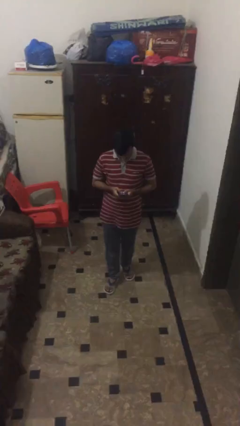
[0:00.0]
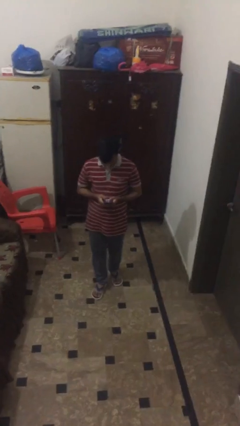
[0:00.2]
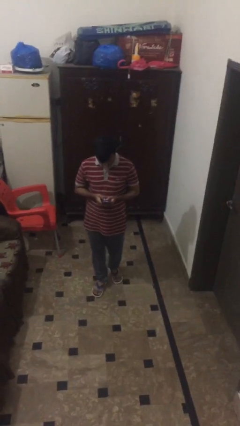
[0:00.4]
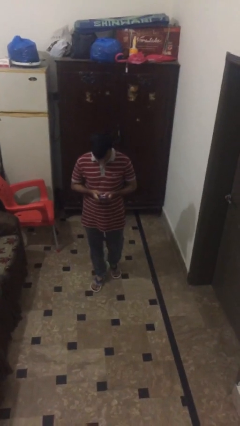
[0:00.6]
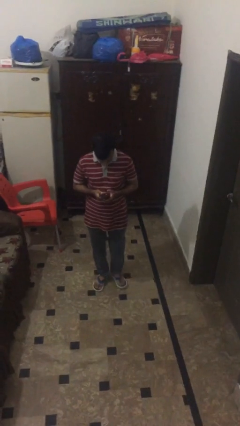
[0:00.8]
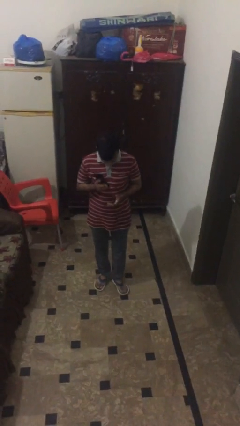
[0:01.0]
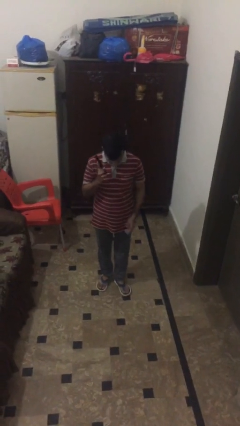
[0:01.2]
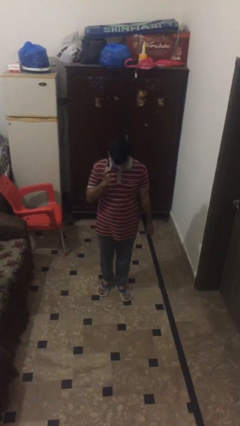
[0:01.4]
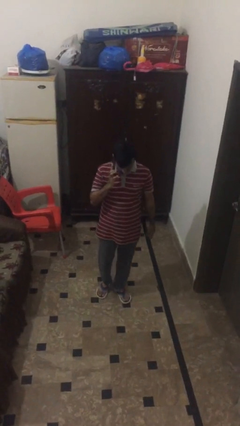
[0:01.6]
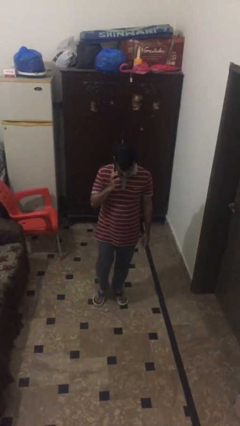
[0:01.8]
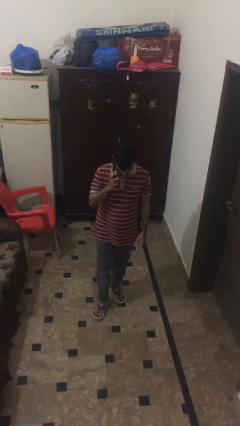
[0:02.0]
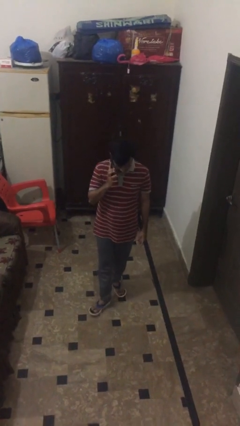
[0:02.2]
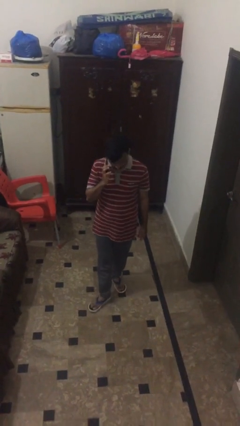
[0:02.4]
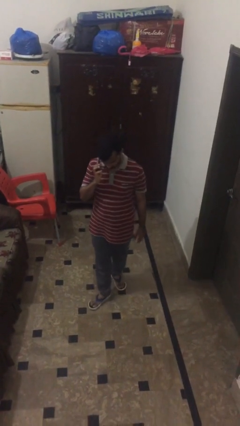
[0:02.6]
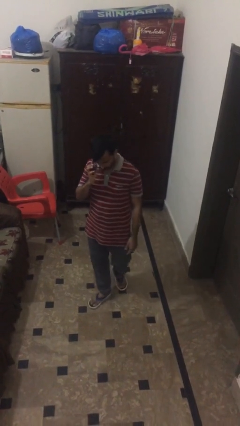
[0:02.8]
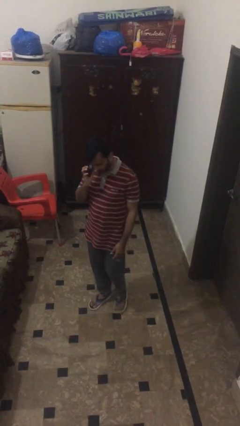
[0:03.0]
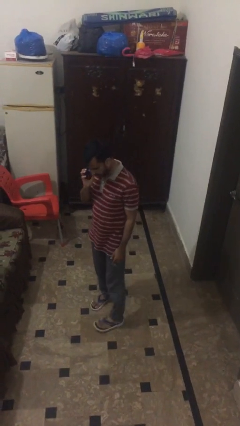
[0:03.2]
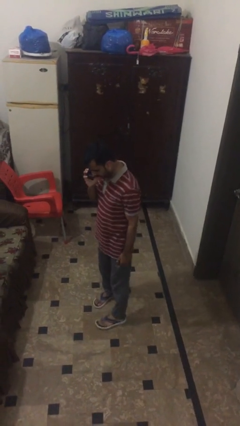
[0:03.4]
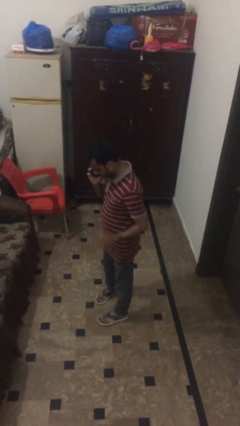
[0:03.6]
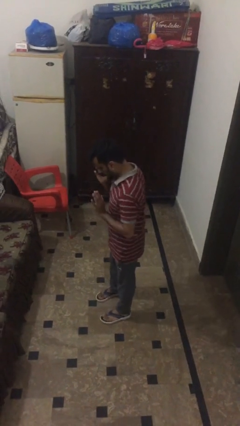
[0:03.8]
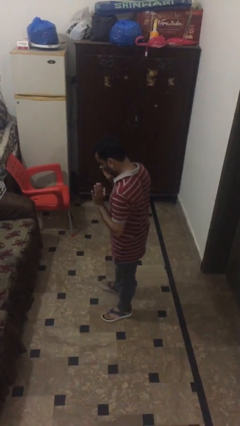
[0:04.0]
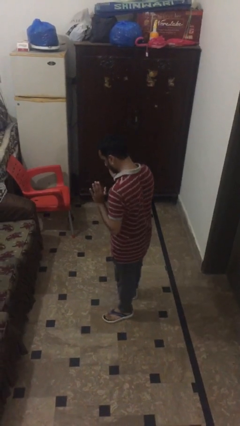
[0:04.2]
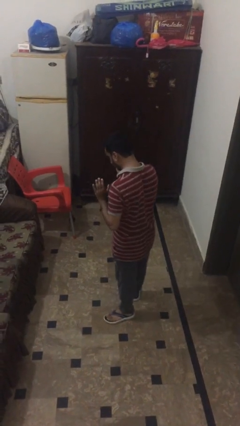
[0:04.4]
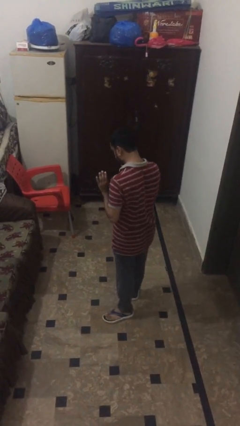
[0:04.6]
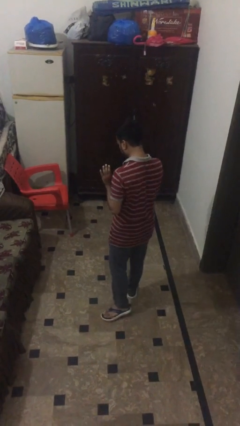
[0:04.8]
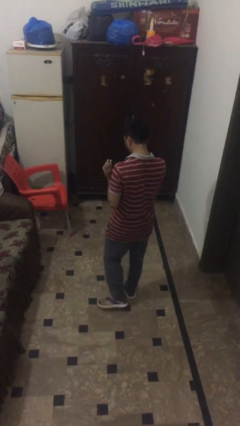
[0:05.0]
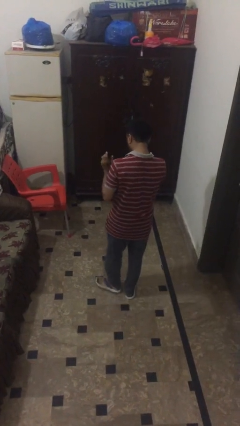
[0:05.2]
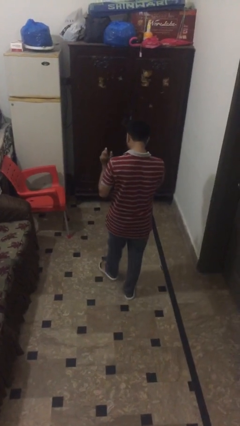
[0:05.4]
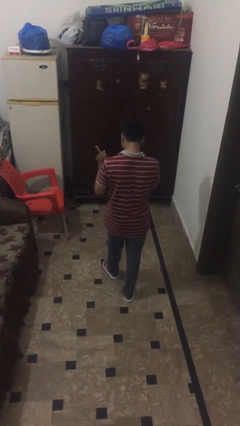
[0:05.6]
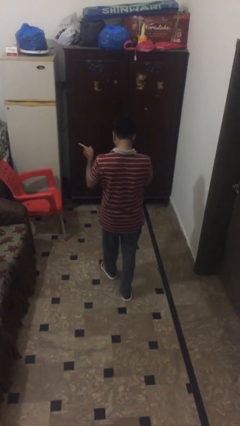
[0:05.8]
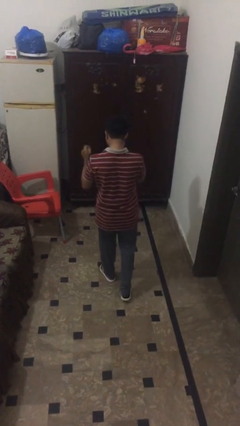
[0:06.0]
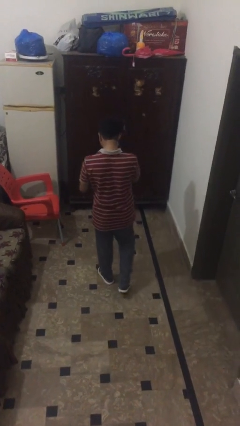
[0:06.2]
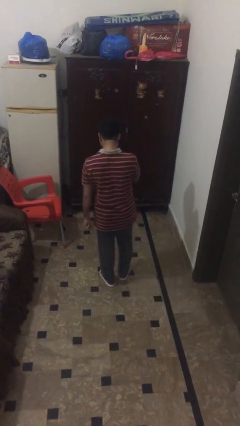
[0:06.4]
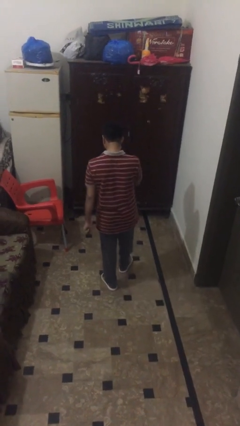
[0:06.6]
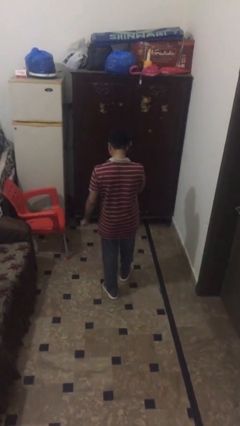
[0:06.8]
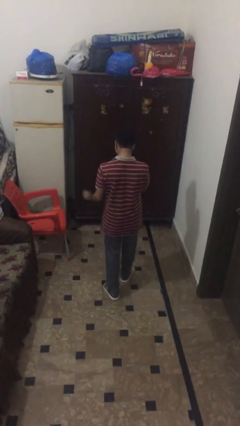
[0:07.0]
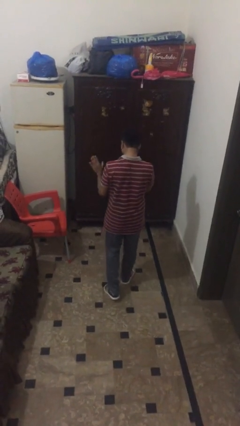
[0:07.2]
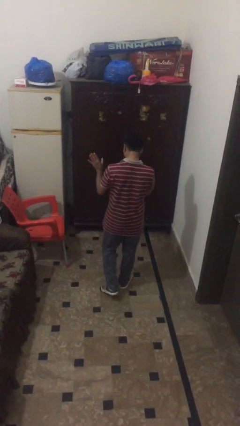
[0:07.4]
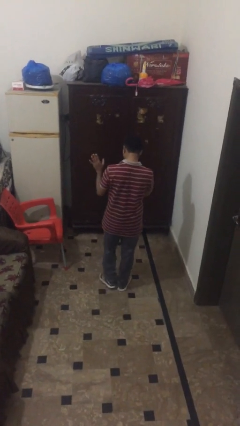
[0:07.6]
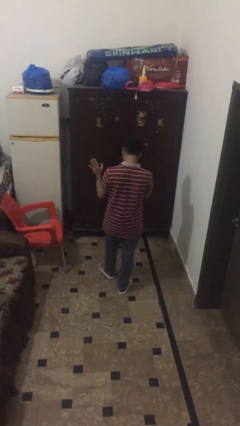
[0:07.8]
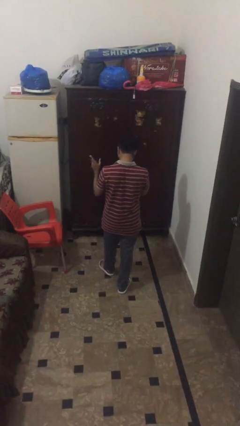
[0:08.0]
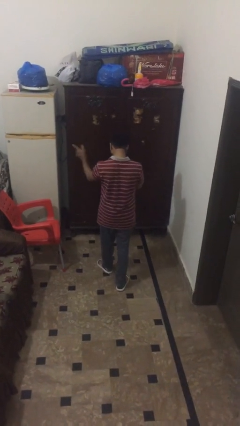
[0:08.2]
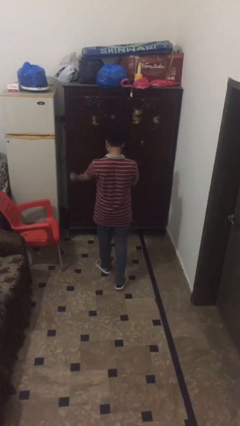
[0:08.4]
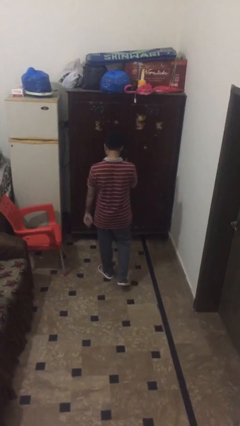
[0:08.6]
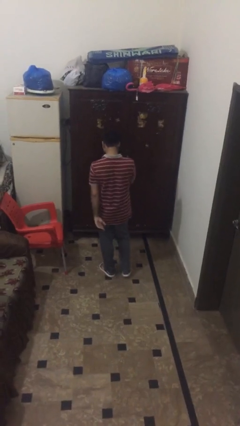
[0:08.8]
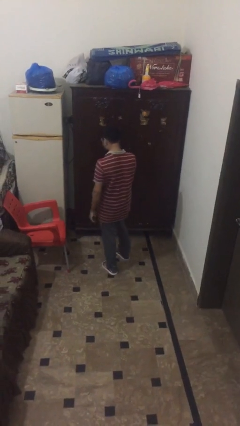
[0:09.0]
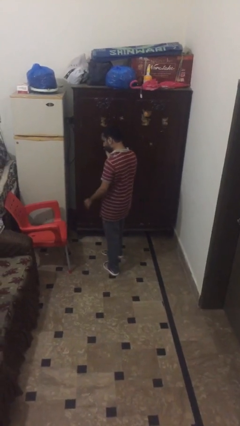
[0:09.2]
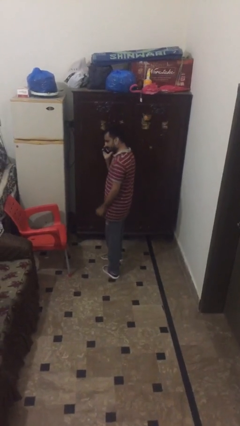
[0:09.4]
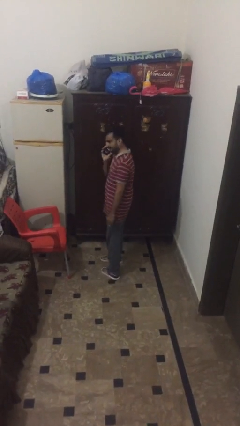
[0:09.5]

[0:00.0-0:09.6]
person talks on phone

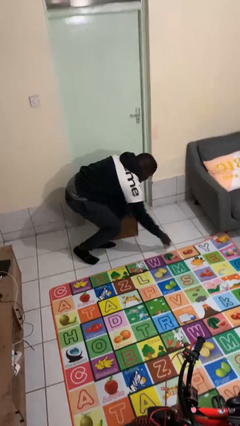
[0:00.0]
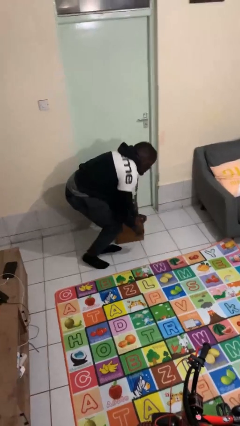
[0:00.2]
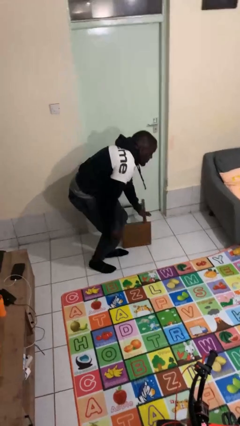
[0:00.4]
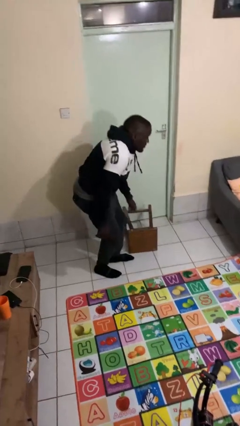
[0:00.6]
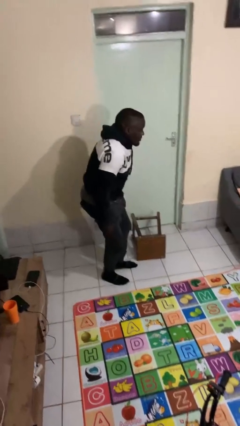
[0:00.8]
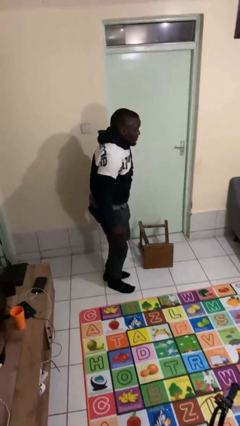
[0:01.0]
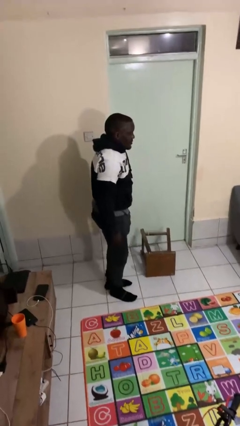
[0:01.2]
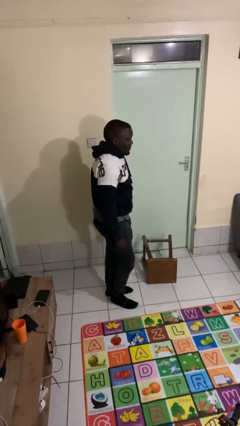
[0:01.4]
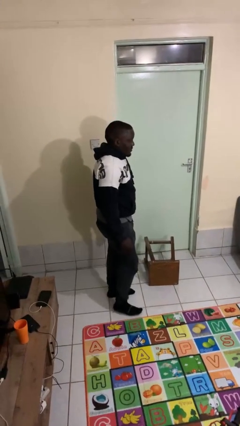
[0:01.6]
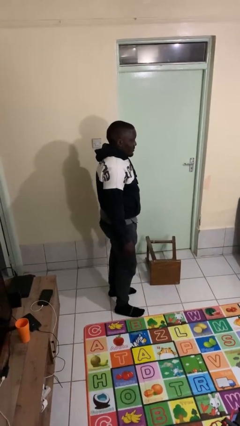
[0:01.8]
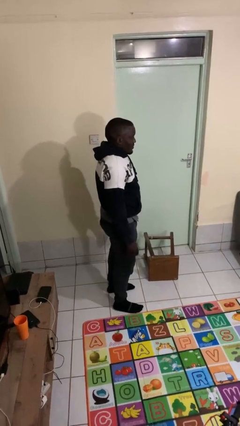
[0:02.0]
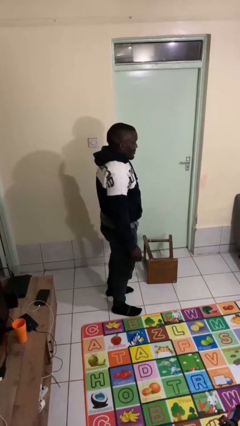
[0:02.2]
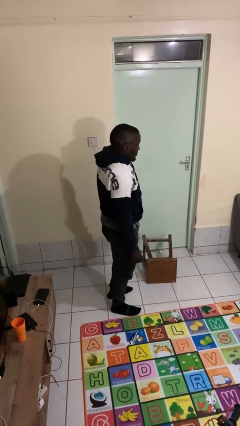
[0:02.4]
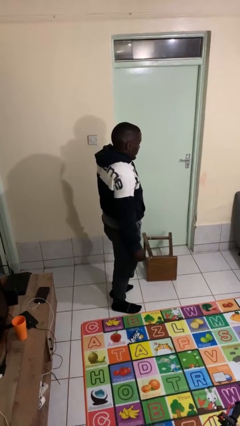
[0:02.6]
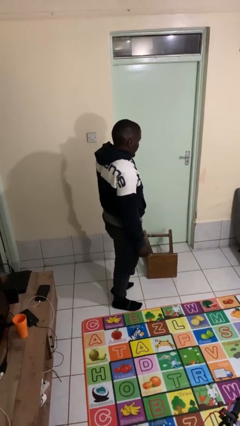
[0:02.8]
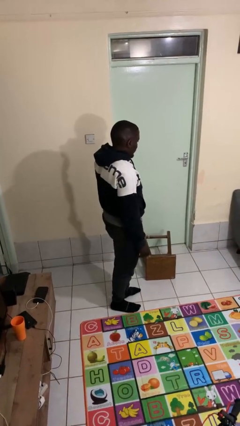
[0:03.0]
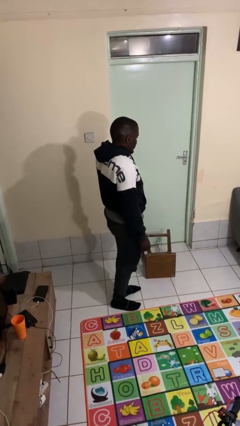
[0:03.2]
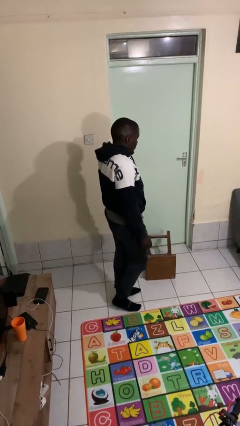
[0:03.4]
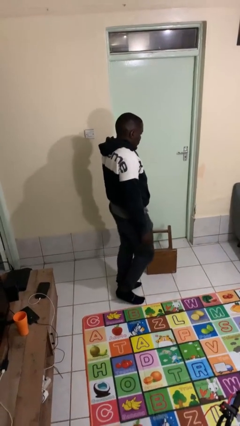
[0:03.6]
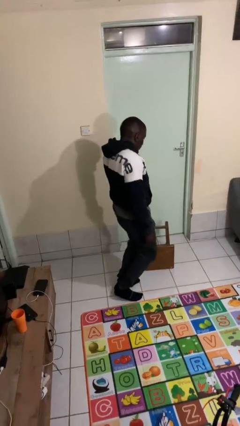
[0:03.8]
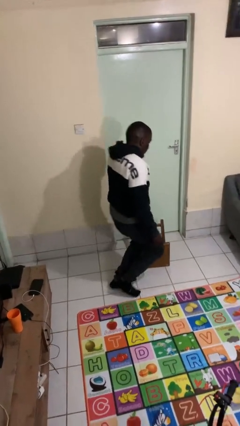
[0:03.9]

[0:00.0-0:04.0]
person stands up from floor

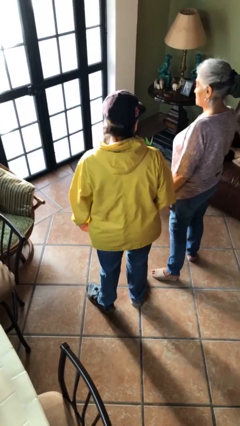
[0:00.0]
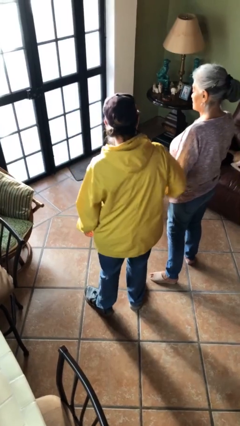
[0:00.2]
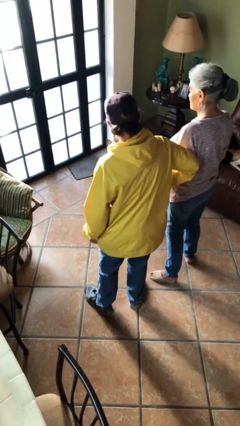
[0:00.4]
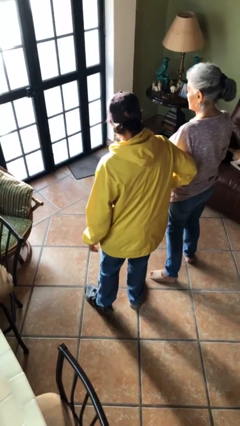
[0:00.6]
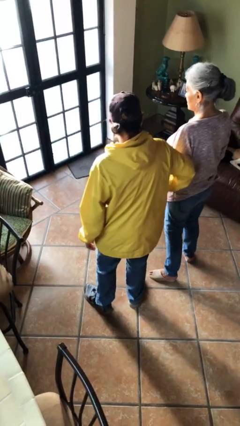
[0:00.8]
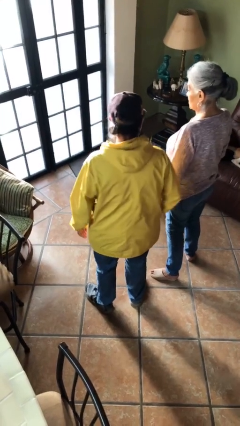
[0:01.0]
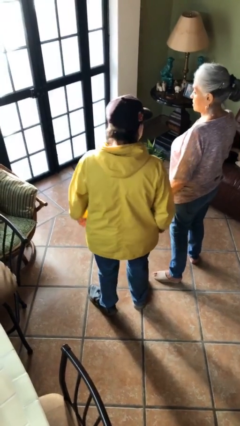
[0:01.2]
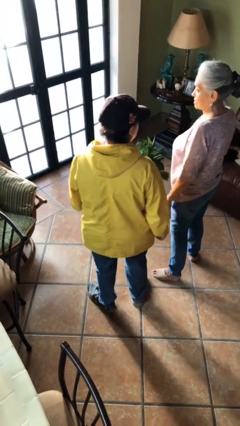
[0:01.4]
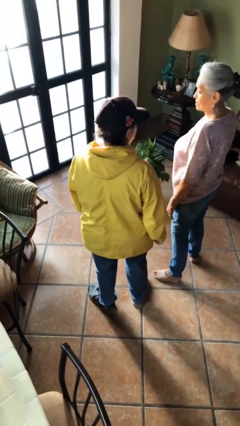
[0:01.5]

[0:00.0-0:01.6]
person nudges person with elbow

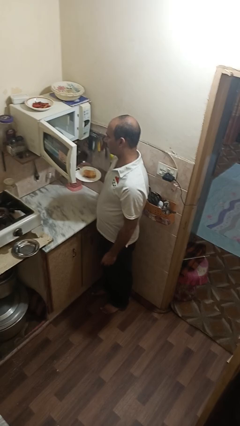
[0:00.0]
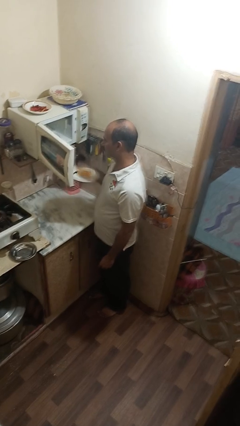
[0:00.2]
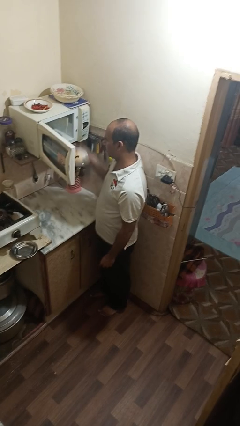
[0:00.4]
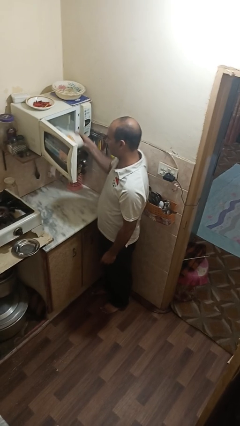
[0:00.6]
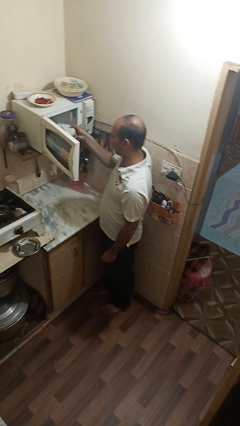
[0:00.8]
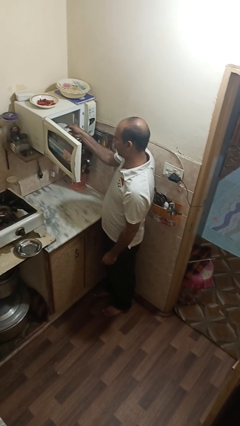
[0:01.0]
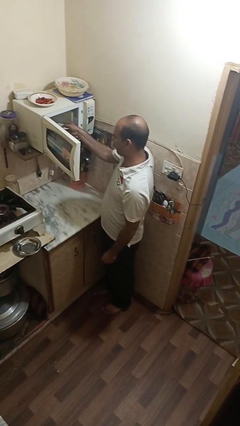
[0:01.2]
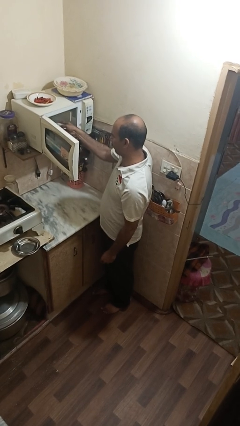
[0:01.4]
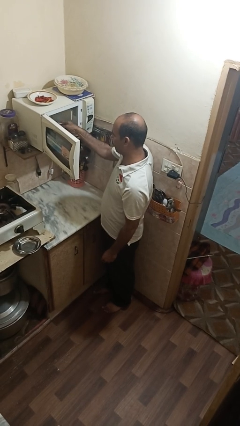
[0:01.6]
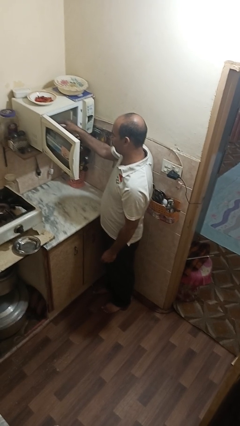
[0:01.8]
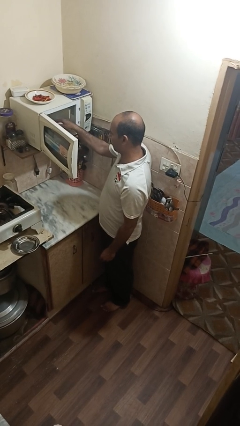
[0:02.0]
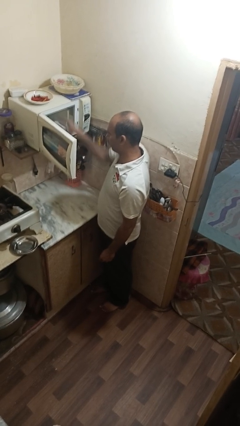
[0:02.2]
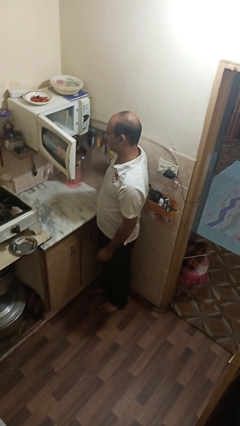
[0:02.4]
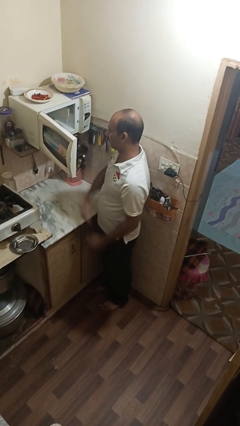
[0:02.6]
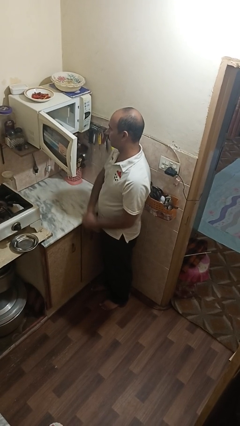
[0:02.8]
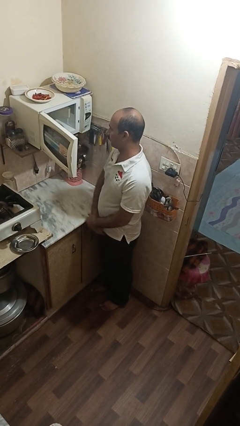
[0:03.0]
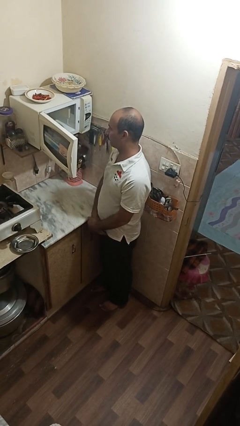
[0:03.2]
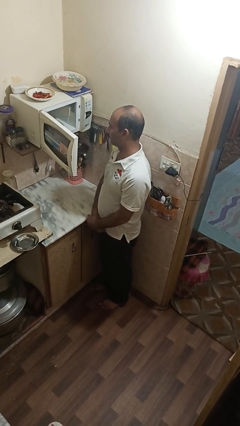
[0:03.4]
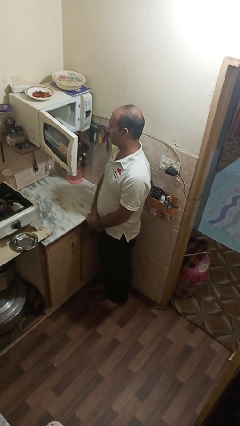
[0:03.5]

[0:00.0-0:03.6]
person puts object into microwave
